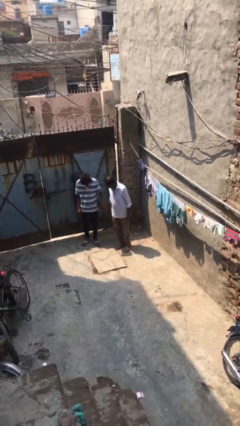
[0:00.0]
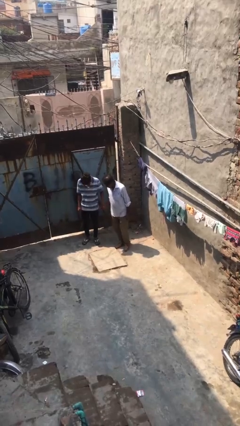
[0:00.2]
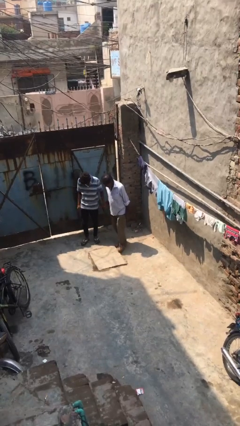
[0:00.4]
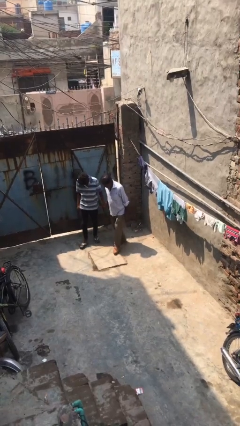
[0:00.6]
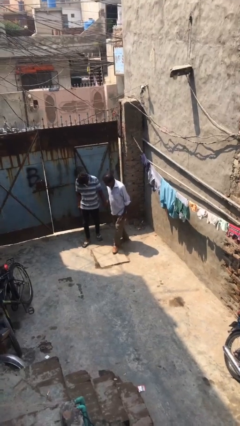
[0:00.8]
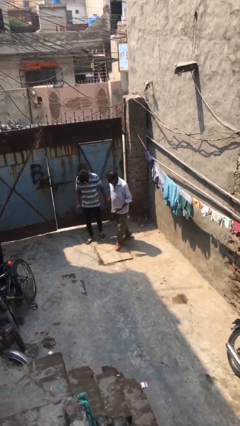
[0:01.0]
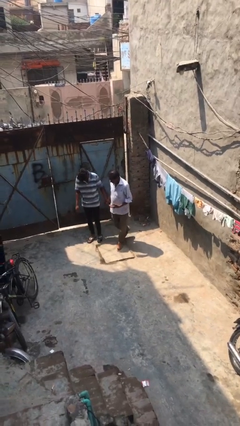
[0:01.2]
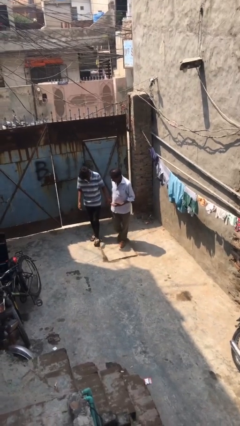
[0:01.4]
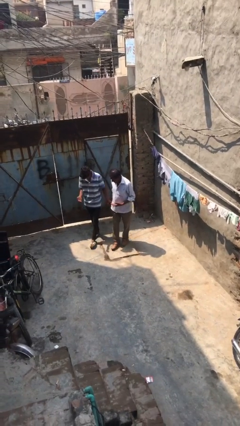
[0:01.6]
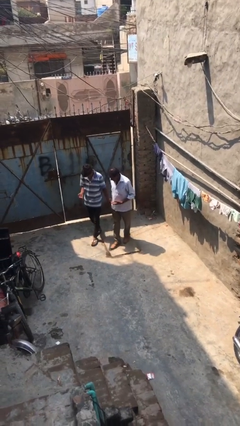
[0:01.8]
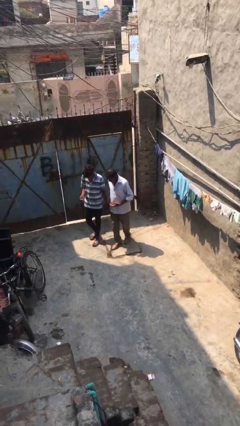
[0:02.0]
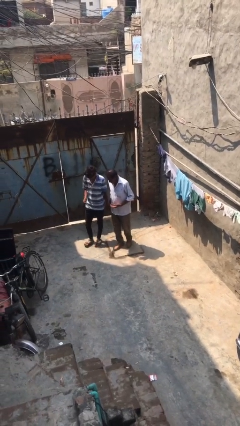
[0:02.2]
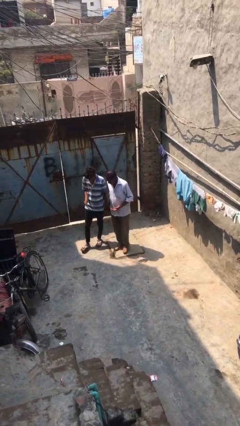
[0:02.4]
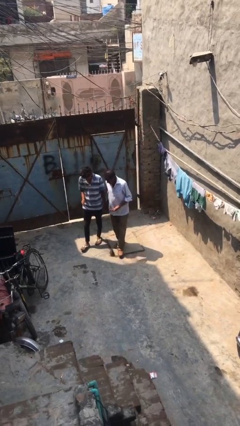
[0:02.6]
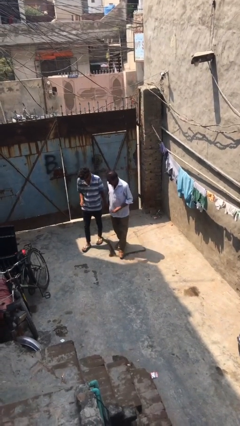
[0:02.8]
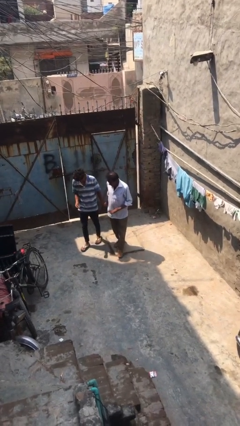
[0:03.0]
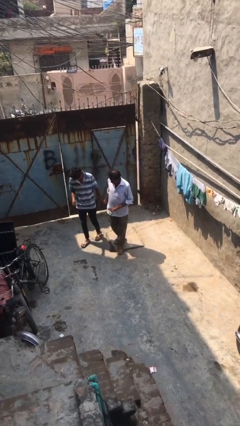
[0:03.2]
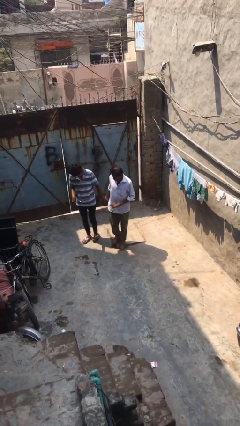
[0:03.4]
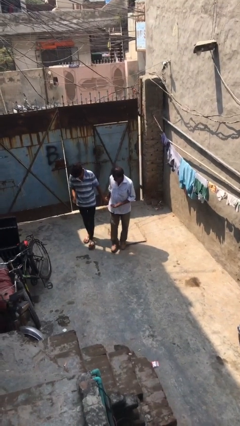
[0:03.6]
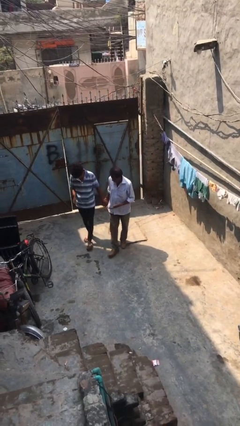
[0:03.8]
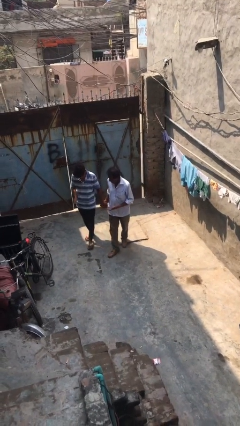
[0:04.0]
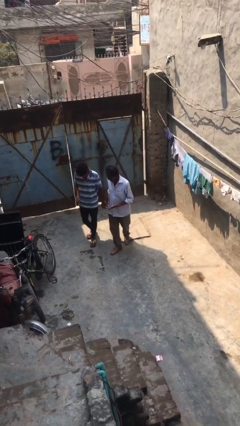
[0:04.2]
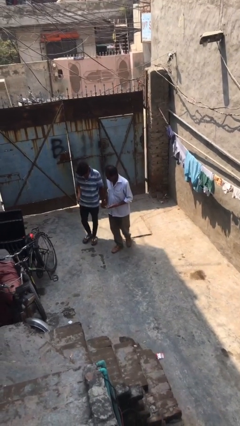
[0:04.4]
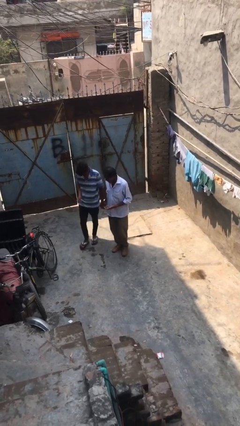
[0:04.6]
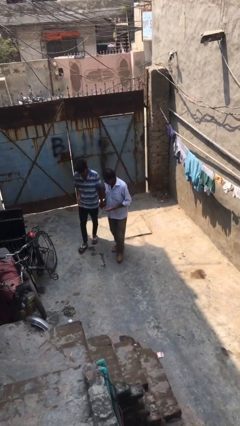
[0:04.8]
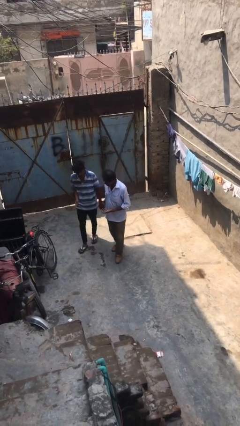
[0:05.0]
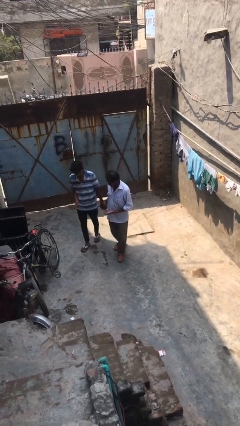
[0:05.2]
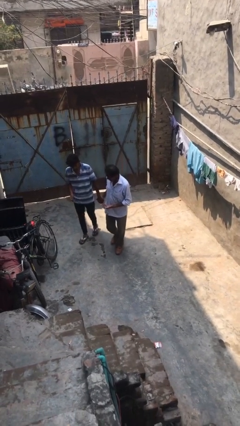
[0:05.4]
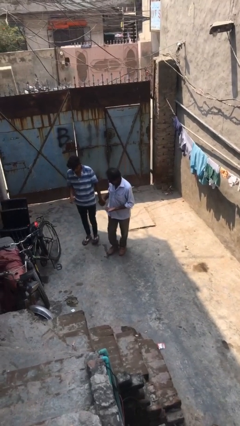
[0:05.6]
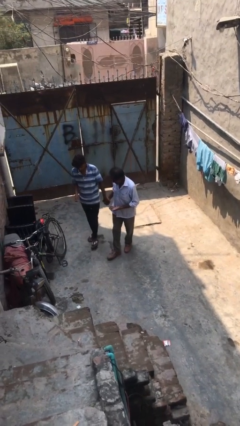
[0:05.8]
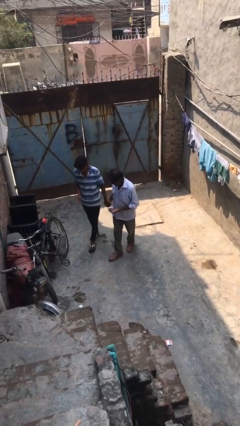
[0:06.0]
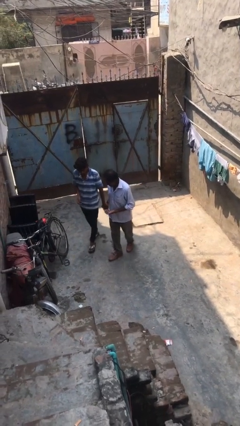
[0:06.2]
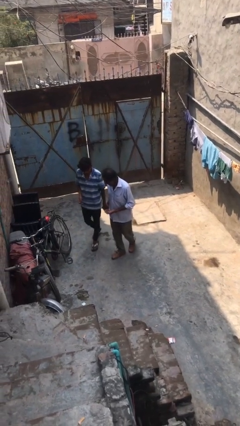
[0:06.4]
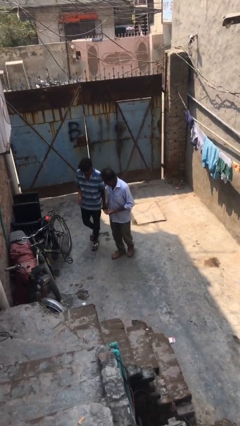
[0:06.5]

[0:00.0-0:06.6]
person holds hand

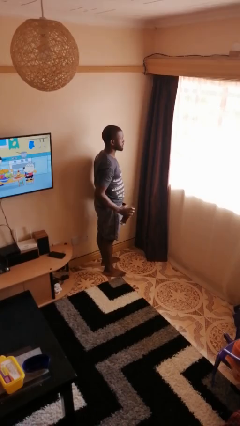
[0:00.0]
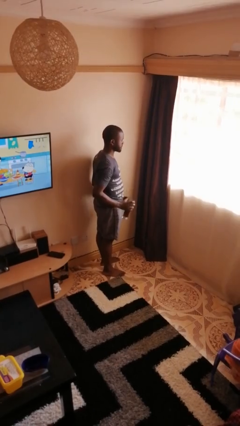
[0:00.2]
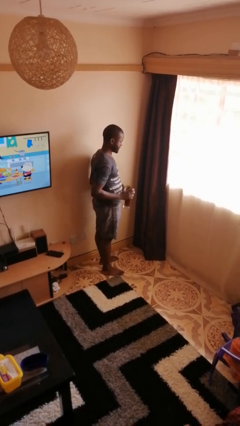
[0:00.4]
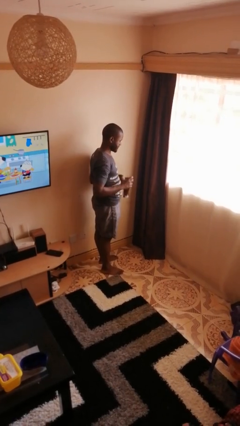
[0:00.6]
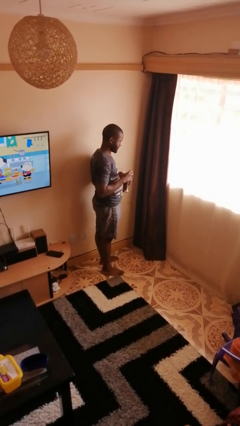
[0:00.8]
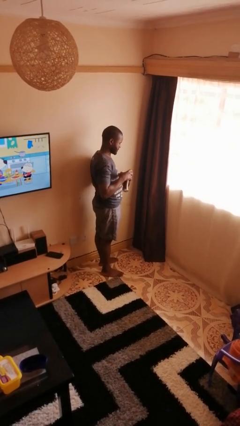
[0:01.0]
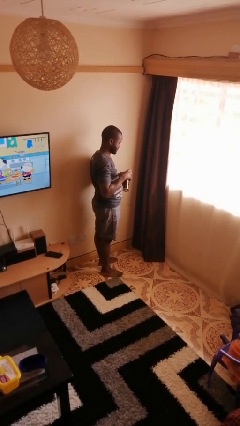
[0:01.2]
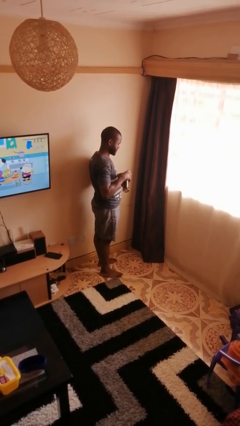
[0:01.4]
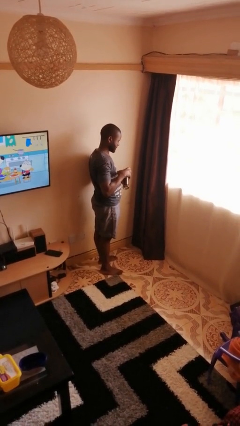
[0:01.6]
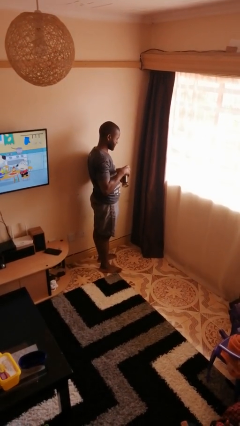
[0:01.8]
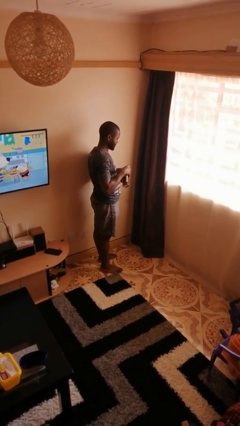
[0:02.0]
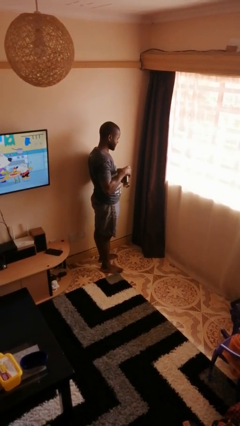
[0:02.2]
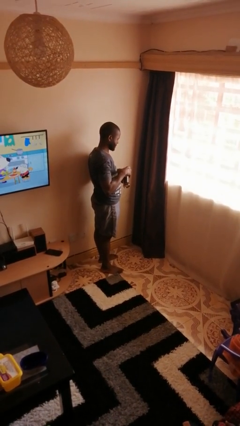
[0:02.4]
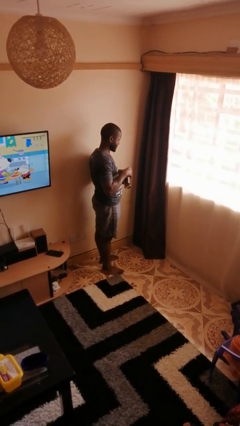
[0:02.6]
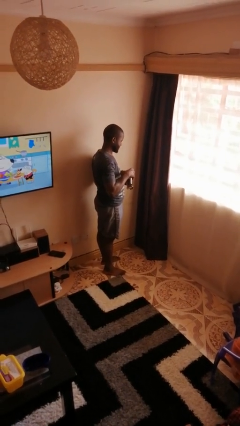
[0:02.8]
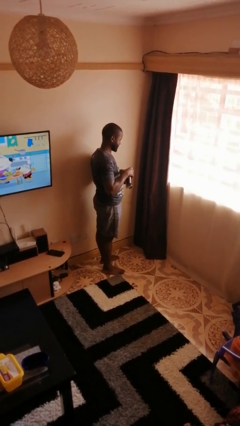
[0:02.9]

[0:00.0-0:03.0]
person pours coffee into mug

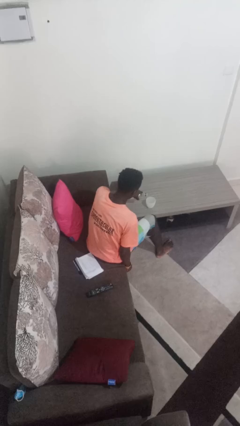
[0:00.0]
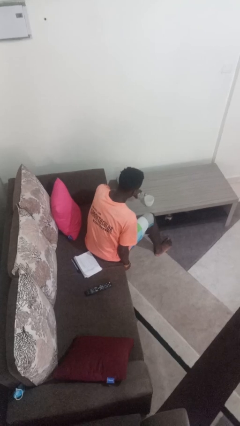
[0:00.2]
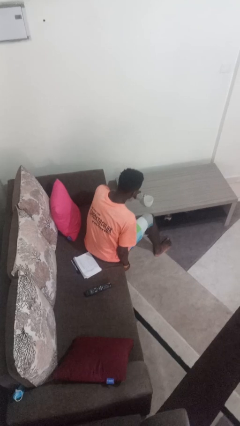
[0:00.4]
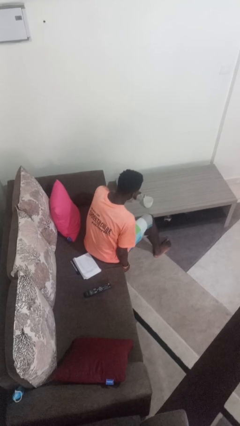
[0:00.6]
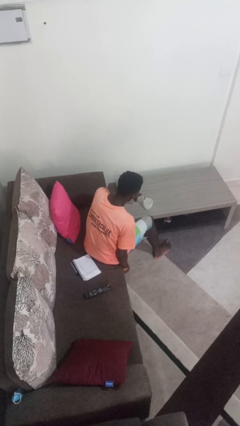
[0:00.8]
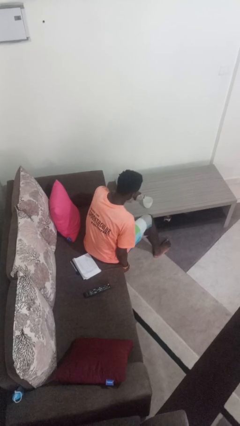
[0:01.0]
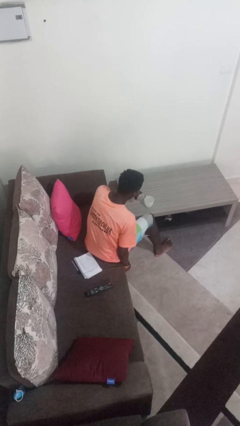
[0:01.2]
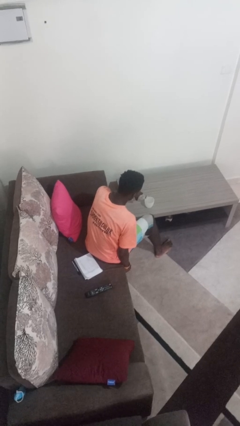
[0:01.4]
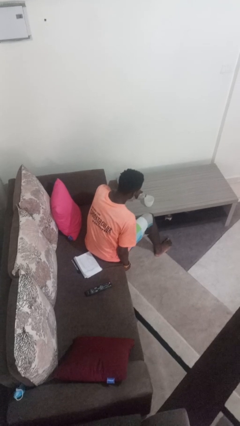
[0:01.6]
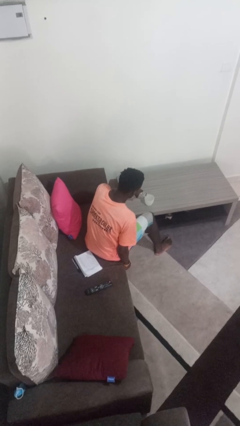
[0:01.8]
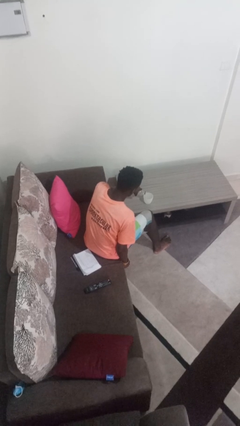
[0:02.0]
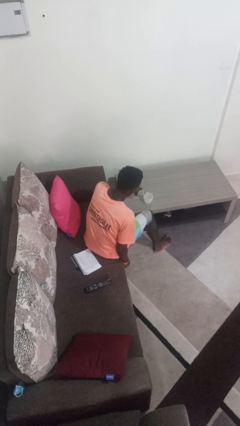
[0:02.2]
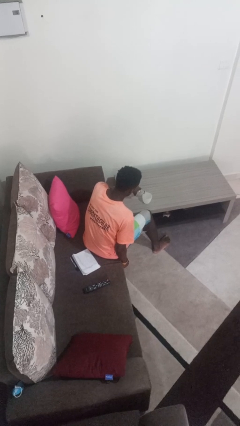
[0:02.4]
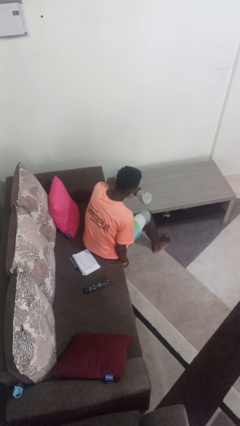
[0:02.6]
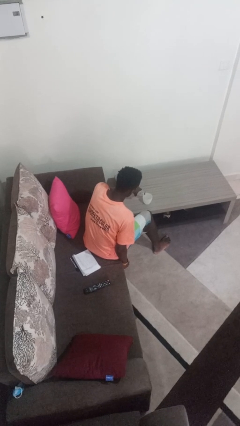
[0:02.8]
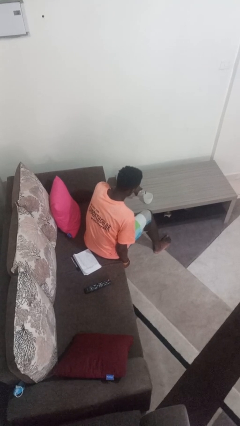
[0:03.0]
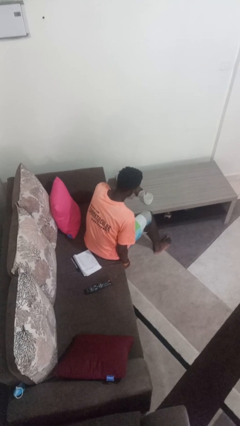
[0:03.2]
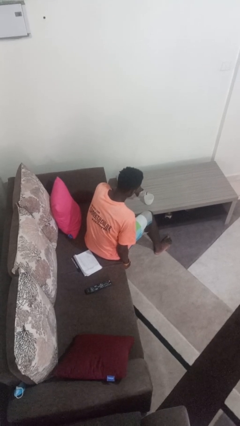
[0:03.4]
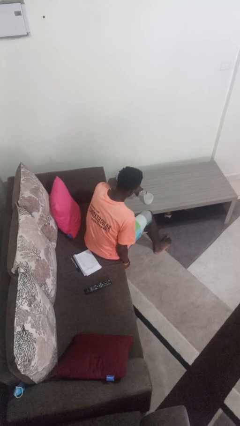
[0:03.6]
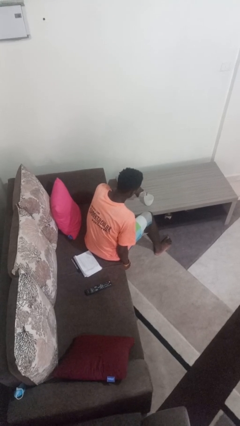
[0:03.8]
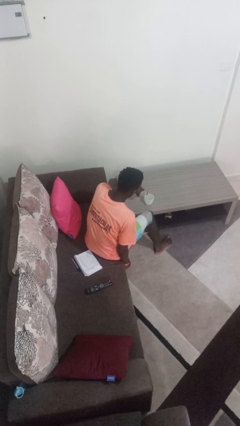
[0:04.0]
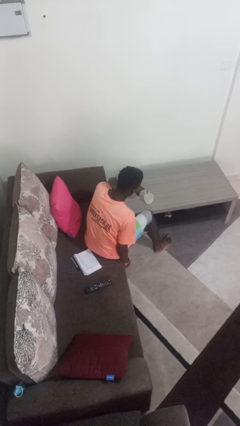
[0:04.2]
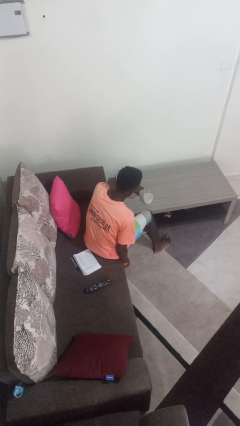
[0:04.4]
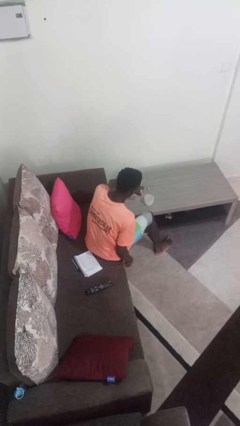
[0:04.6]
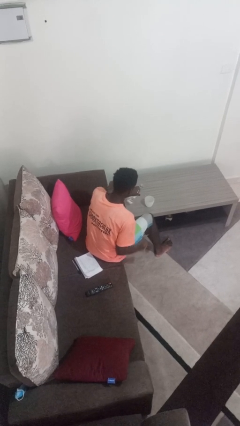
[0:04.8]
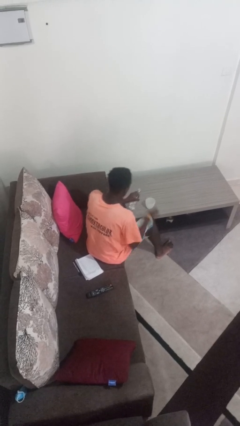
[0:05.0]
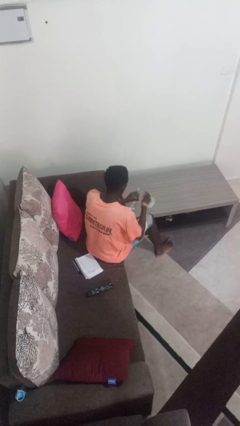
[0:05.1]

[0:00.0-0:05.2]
person pours liquid into cup

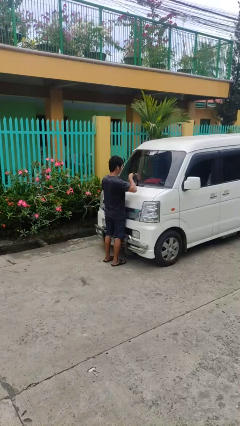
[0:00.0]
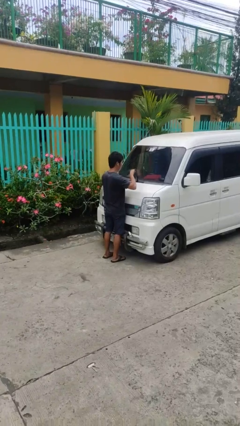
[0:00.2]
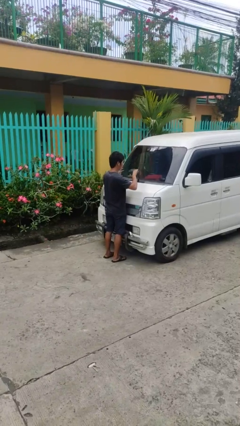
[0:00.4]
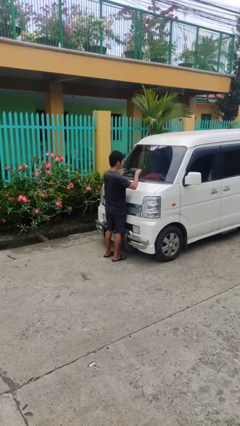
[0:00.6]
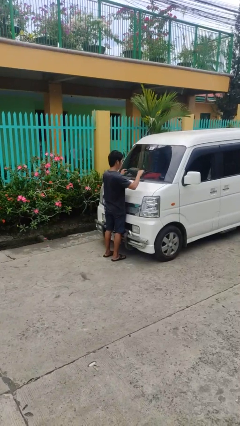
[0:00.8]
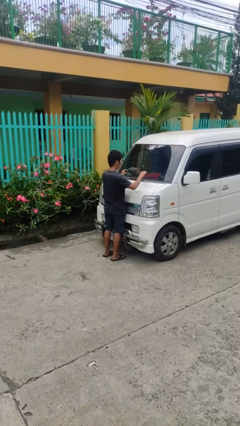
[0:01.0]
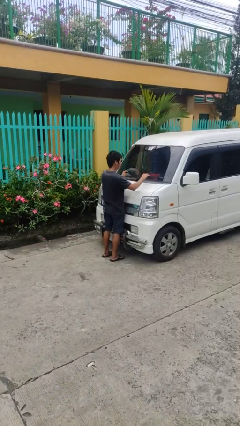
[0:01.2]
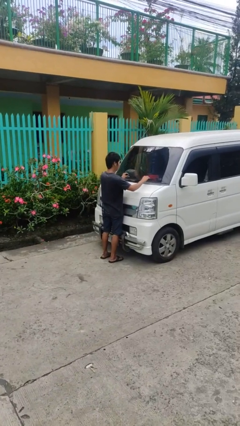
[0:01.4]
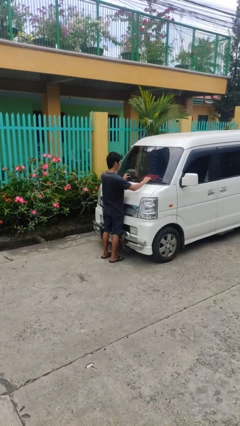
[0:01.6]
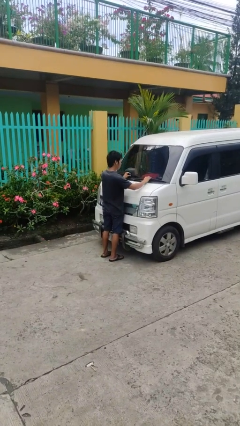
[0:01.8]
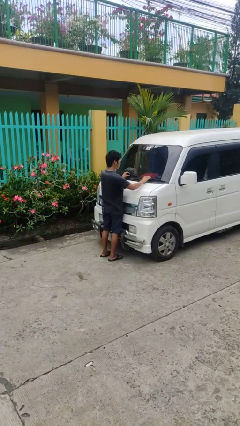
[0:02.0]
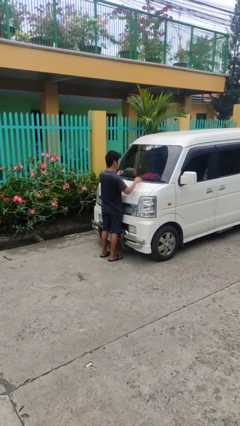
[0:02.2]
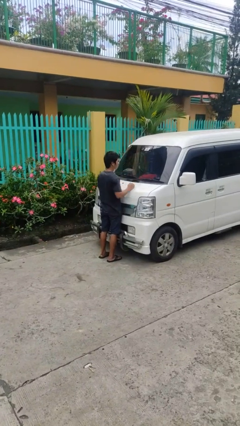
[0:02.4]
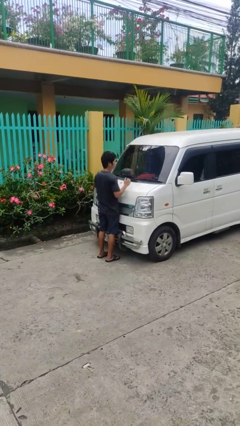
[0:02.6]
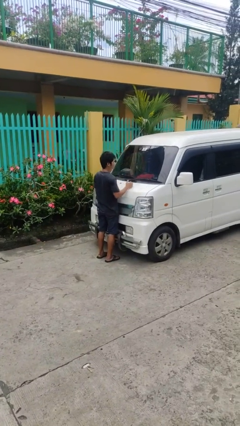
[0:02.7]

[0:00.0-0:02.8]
person flips down car wipers
